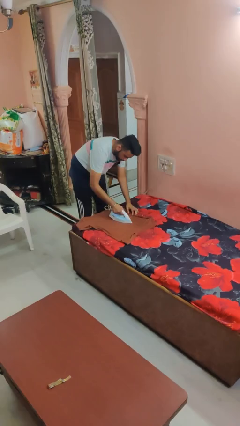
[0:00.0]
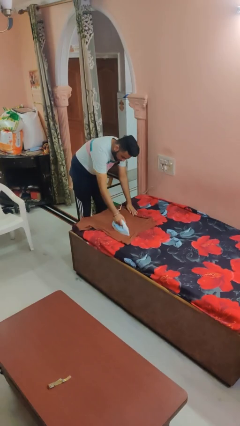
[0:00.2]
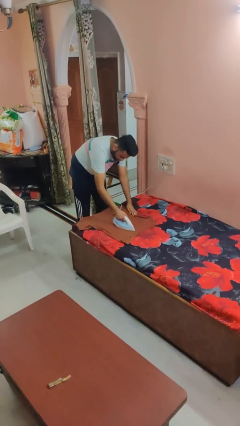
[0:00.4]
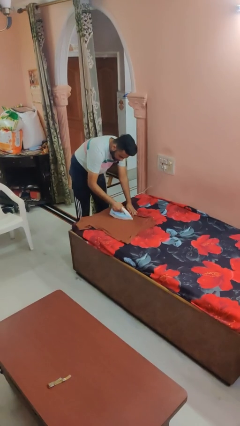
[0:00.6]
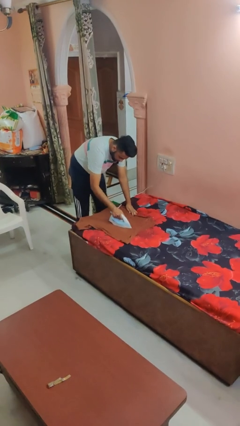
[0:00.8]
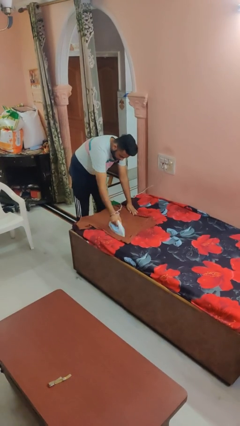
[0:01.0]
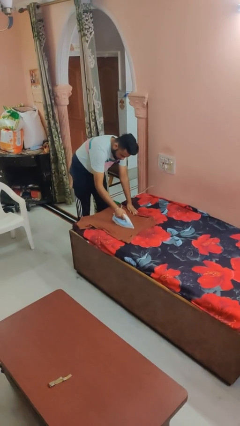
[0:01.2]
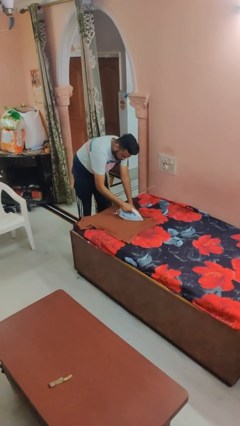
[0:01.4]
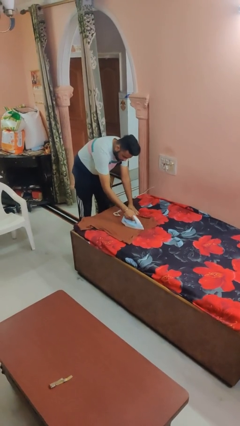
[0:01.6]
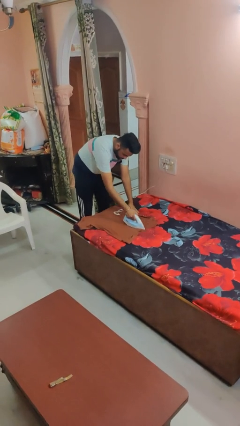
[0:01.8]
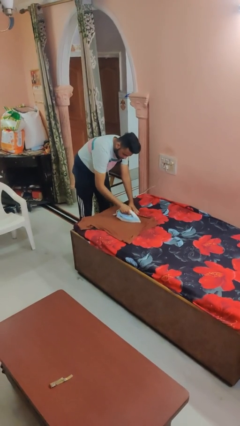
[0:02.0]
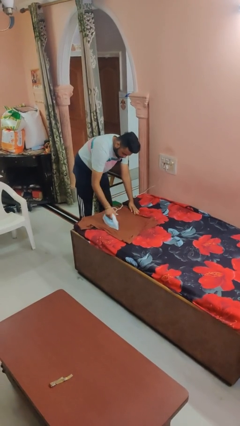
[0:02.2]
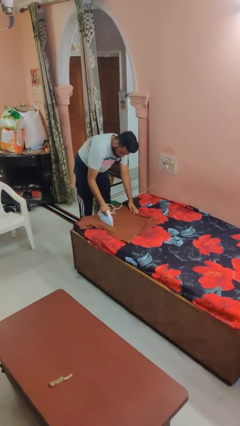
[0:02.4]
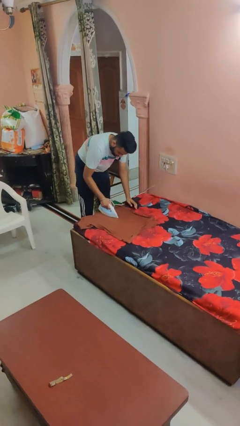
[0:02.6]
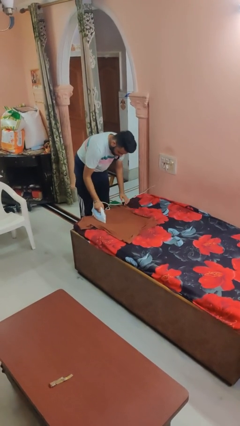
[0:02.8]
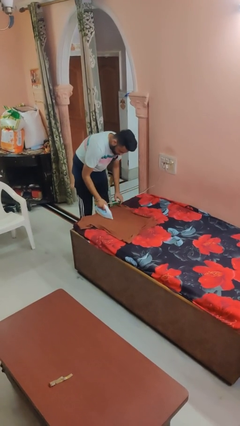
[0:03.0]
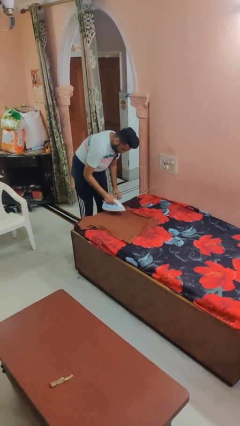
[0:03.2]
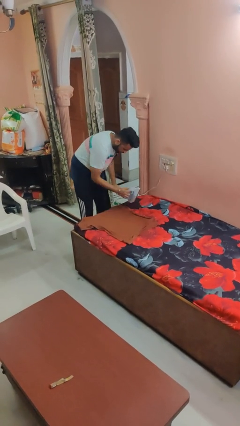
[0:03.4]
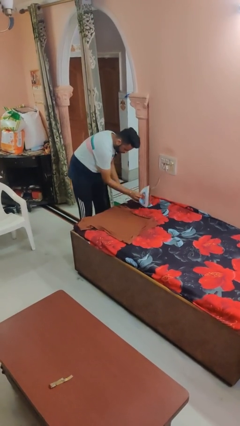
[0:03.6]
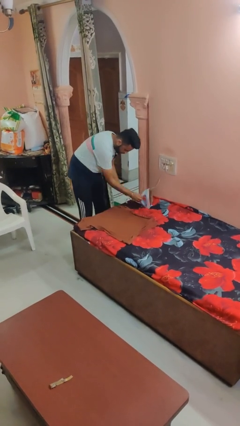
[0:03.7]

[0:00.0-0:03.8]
person irons clothes

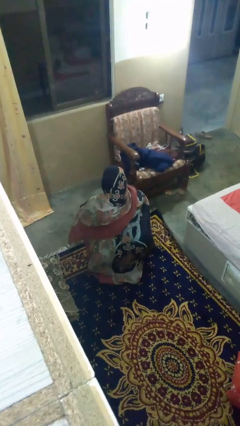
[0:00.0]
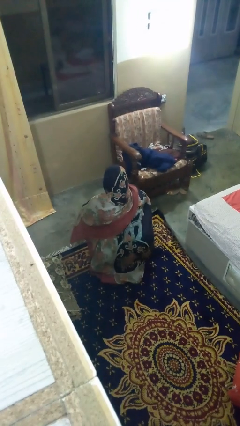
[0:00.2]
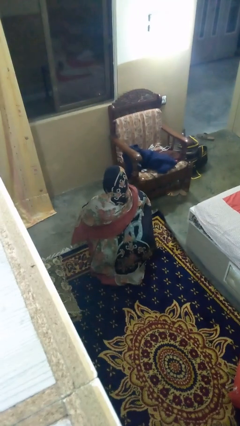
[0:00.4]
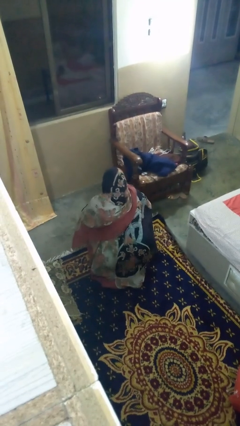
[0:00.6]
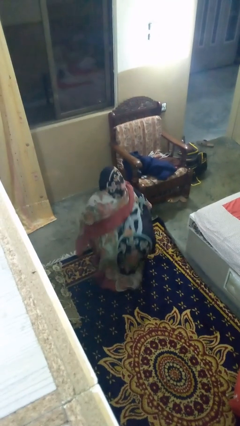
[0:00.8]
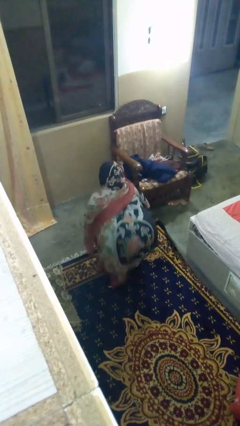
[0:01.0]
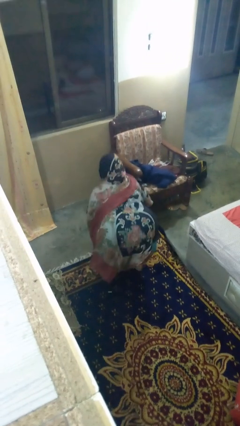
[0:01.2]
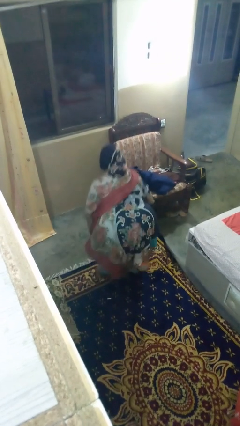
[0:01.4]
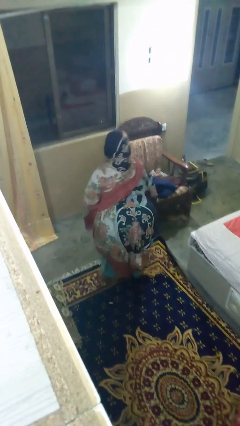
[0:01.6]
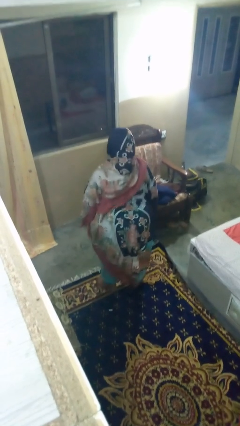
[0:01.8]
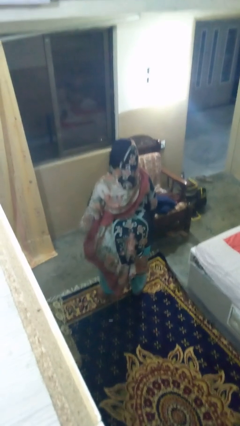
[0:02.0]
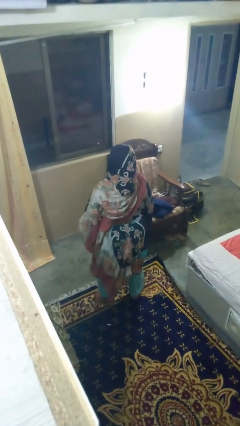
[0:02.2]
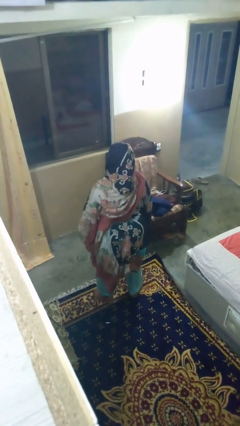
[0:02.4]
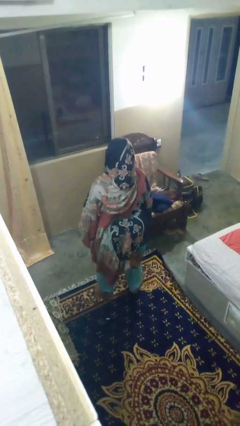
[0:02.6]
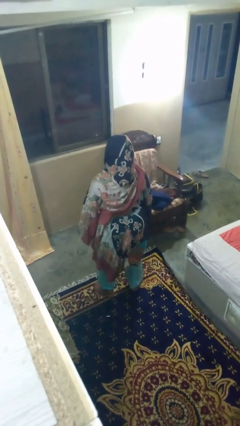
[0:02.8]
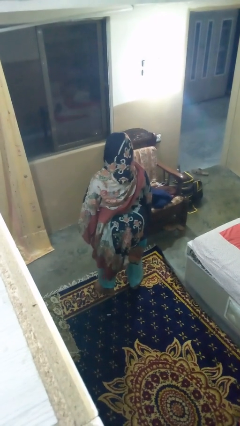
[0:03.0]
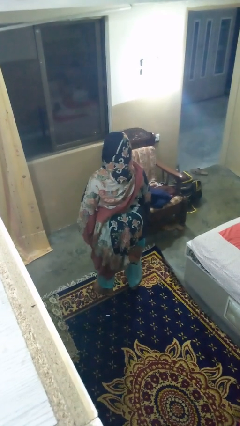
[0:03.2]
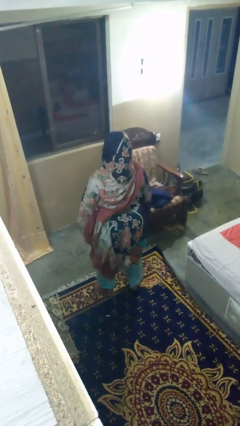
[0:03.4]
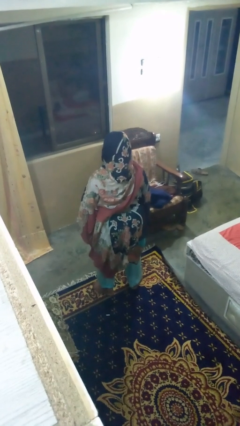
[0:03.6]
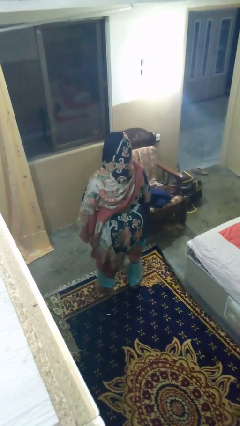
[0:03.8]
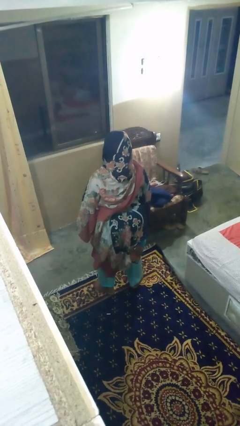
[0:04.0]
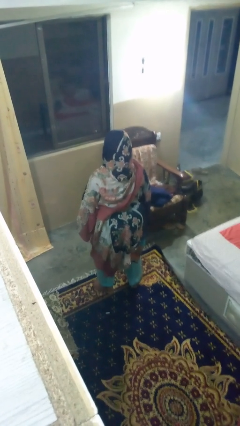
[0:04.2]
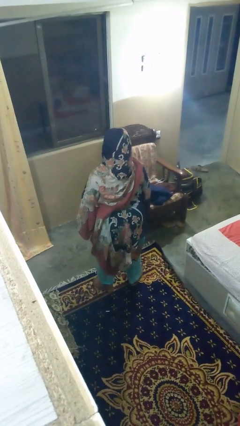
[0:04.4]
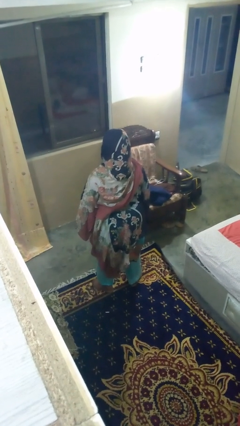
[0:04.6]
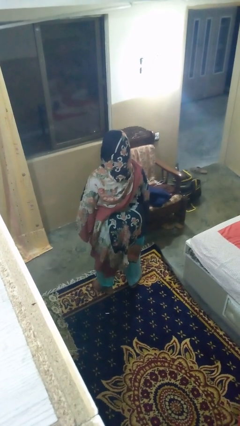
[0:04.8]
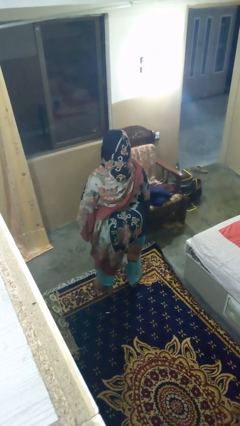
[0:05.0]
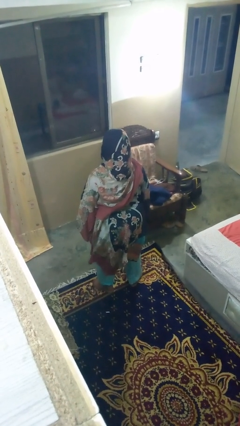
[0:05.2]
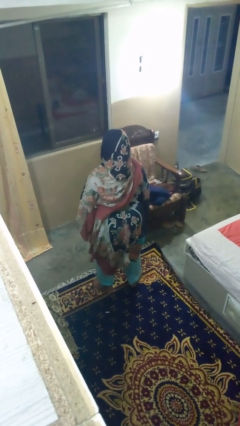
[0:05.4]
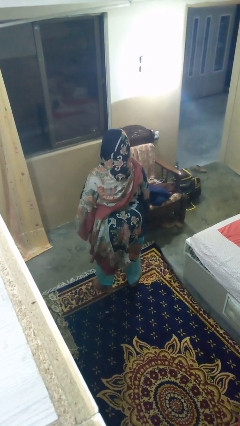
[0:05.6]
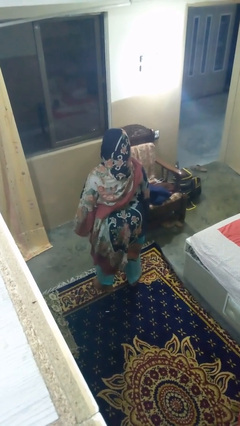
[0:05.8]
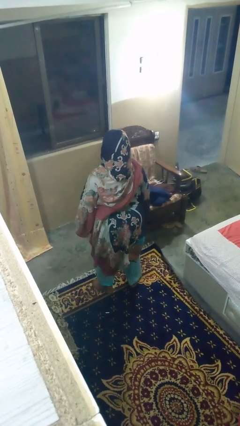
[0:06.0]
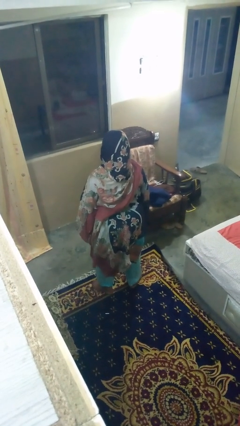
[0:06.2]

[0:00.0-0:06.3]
person stands up

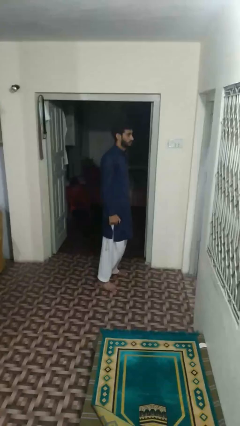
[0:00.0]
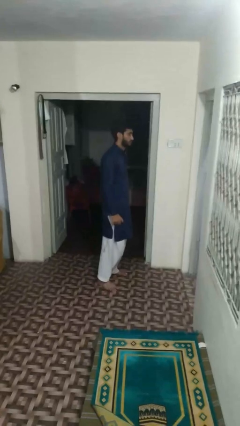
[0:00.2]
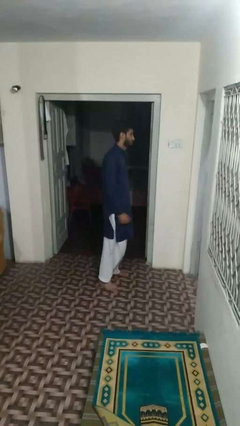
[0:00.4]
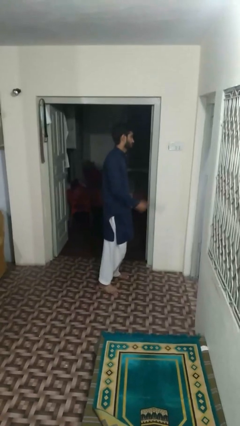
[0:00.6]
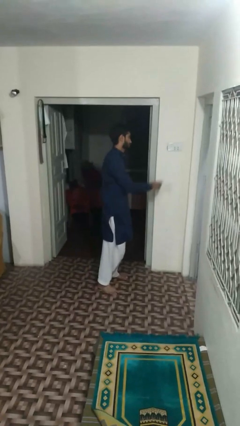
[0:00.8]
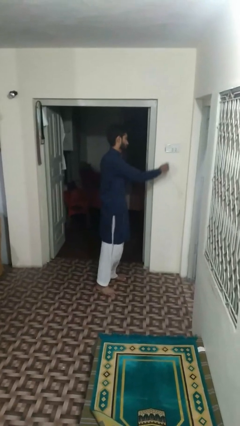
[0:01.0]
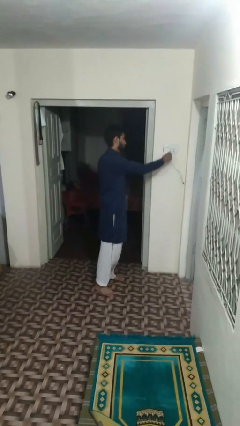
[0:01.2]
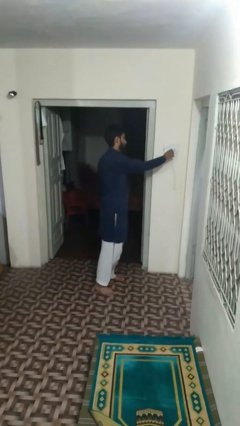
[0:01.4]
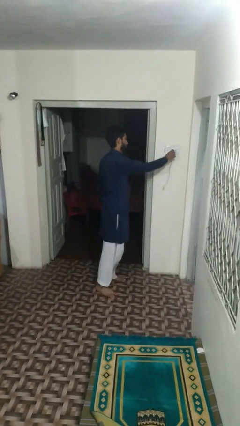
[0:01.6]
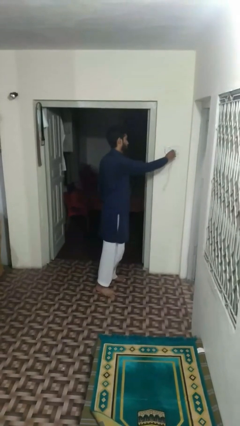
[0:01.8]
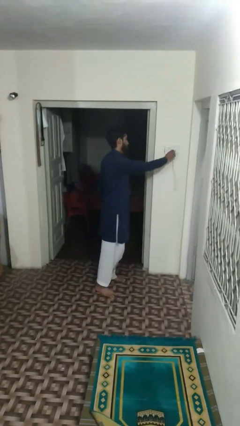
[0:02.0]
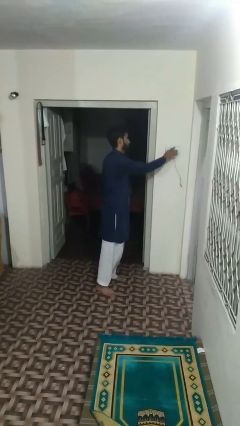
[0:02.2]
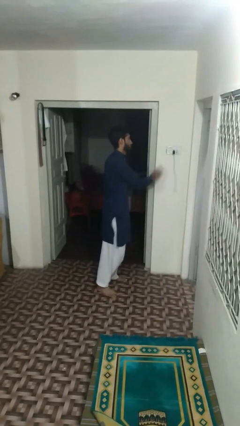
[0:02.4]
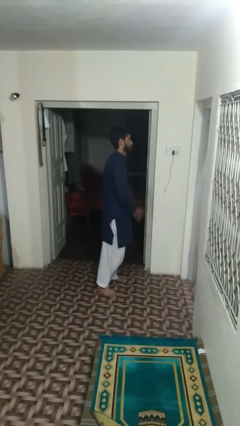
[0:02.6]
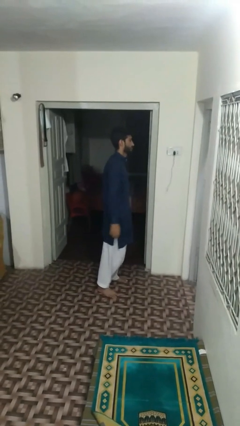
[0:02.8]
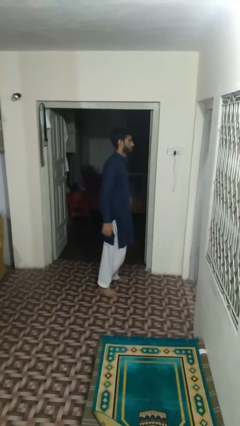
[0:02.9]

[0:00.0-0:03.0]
person plugs into electrical socket

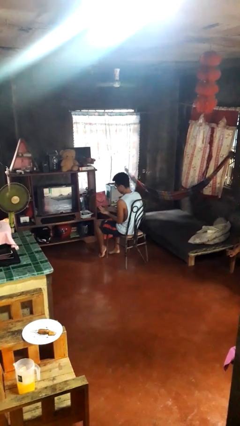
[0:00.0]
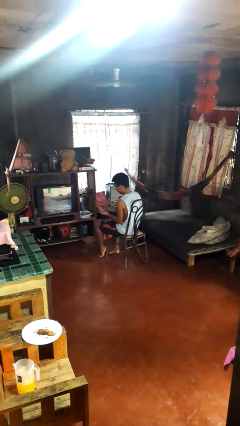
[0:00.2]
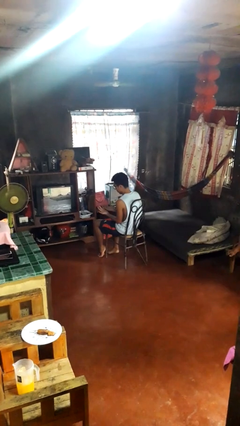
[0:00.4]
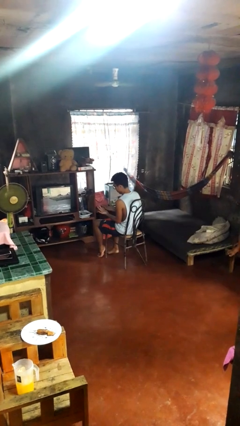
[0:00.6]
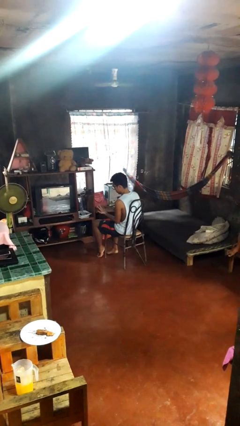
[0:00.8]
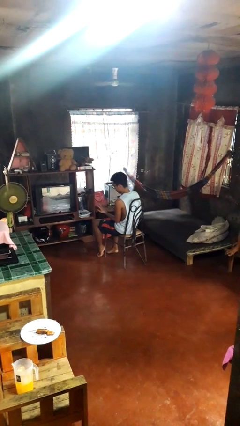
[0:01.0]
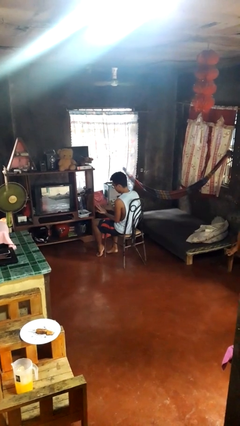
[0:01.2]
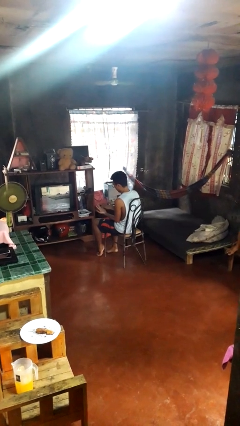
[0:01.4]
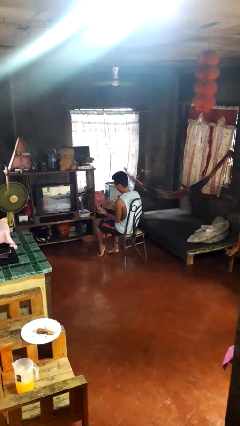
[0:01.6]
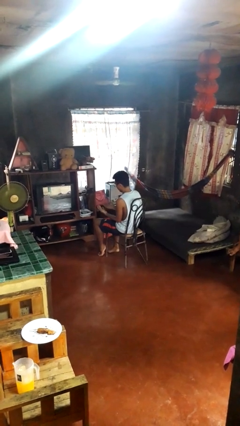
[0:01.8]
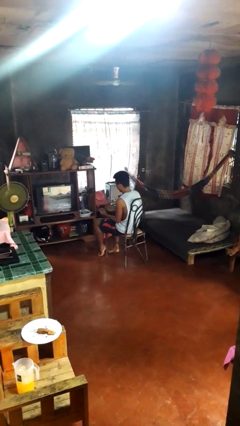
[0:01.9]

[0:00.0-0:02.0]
person looks at hands in lap

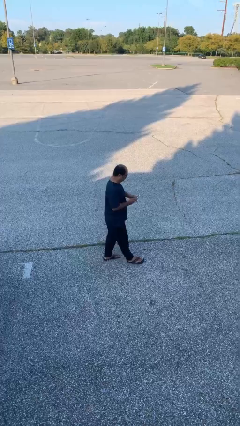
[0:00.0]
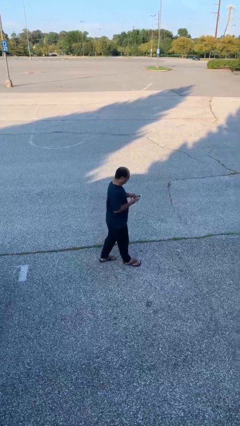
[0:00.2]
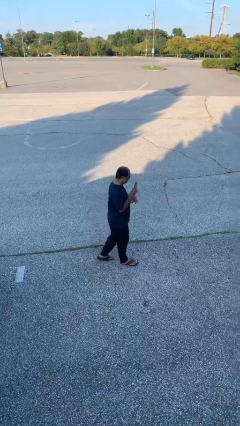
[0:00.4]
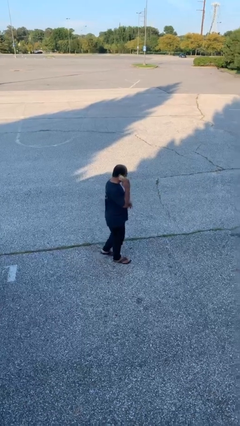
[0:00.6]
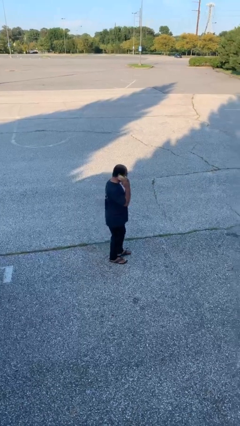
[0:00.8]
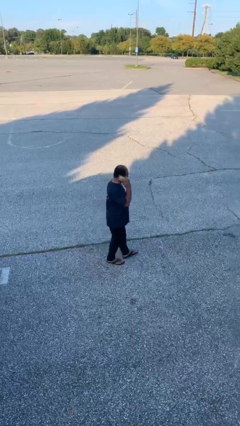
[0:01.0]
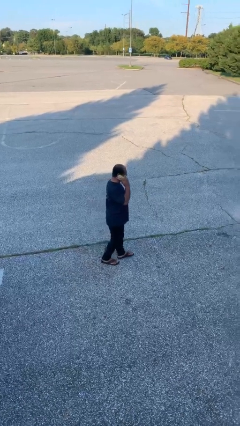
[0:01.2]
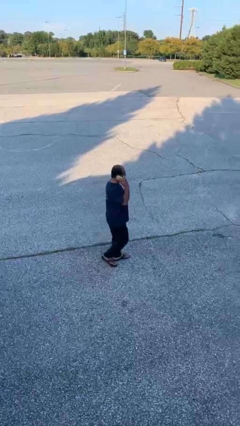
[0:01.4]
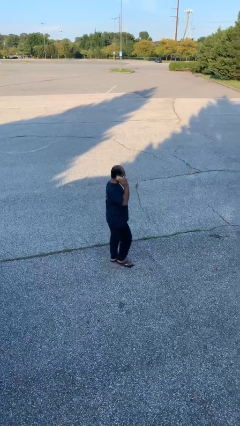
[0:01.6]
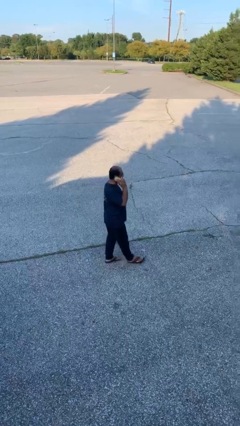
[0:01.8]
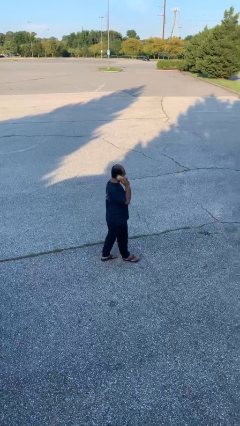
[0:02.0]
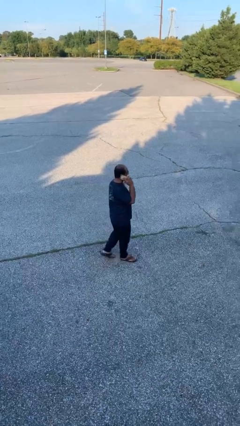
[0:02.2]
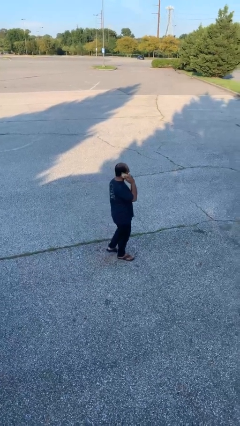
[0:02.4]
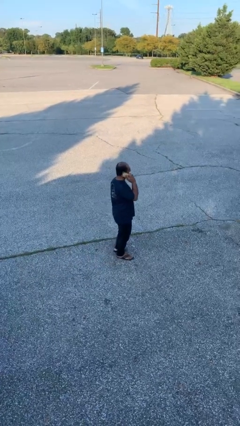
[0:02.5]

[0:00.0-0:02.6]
person talks on phone

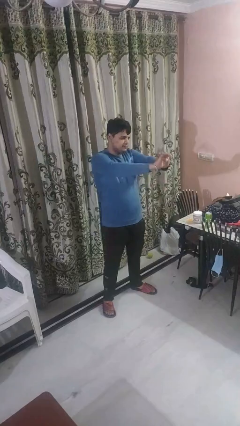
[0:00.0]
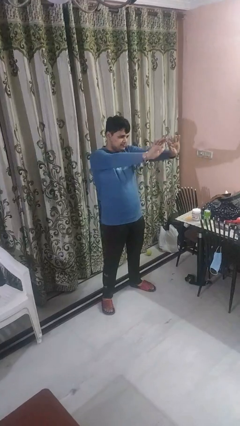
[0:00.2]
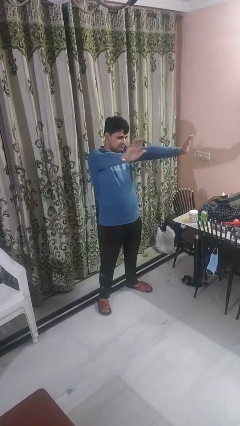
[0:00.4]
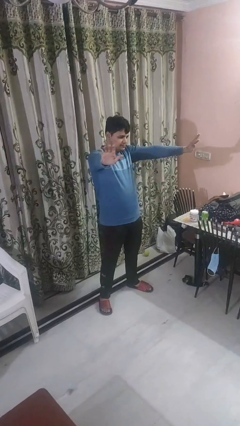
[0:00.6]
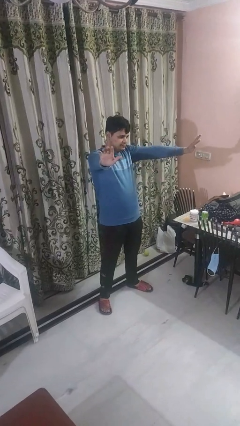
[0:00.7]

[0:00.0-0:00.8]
person gestures zoom in
